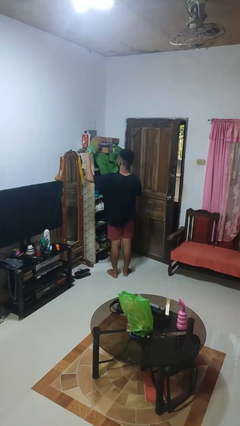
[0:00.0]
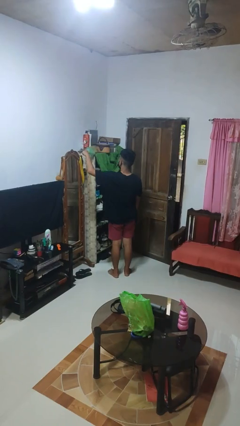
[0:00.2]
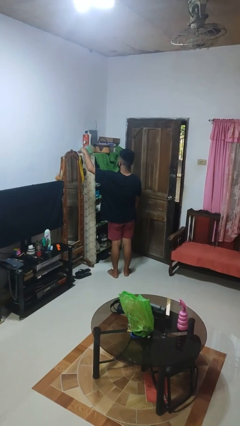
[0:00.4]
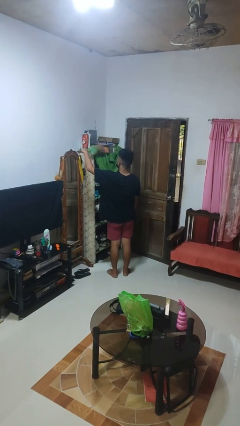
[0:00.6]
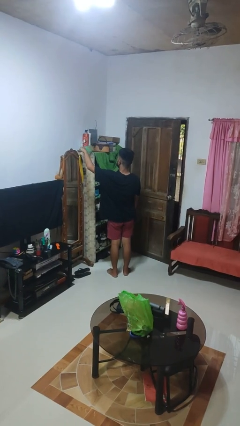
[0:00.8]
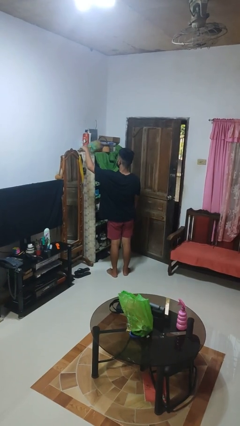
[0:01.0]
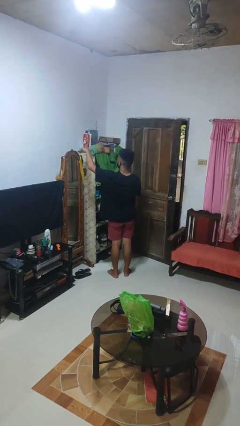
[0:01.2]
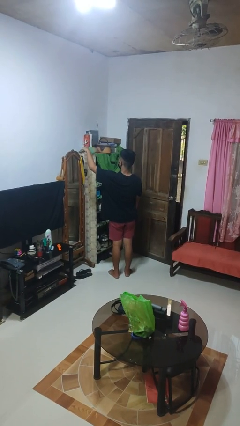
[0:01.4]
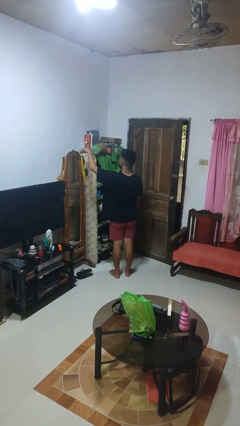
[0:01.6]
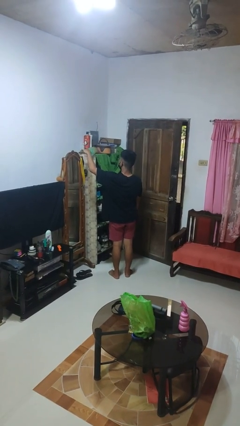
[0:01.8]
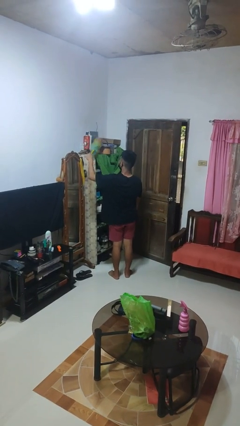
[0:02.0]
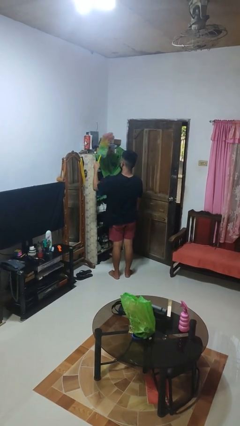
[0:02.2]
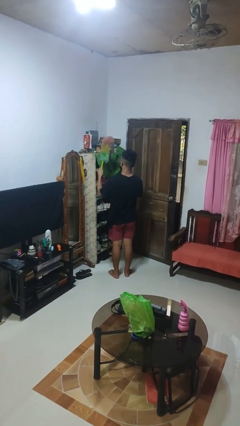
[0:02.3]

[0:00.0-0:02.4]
person dusts furniture

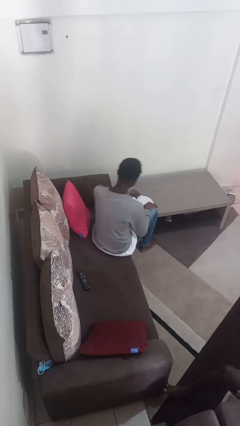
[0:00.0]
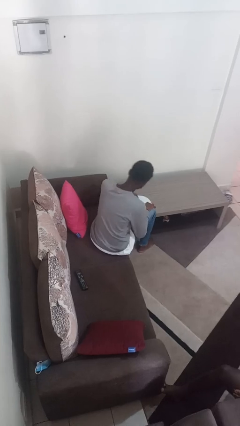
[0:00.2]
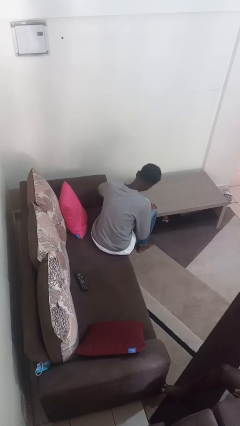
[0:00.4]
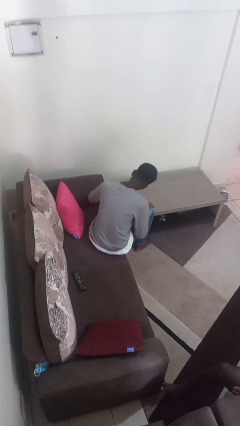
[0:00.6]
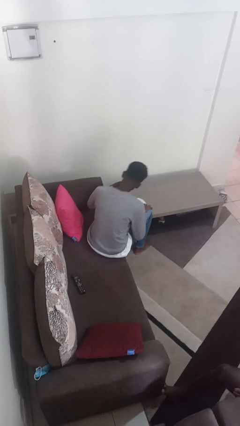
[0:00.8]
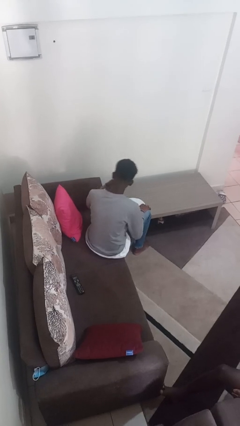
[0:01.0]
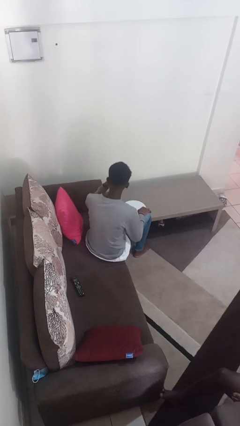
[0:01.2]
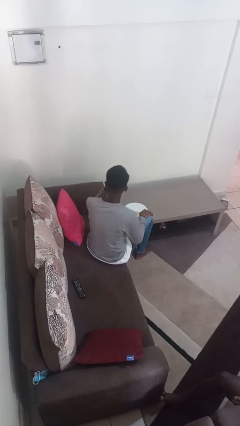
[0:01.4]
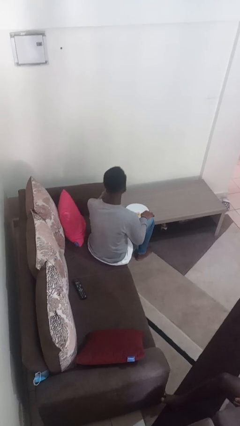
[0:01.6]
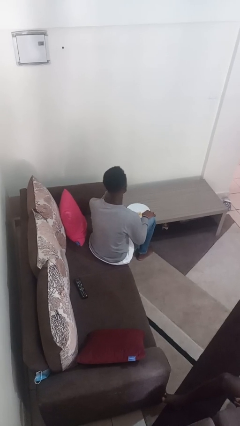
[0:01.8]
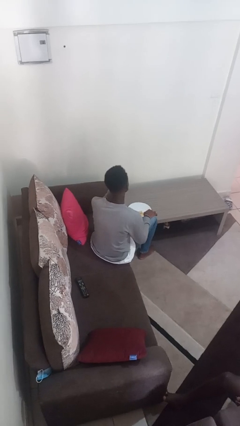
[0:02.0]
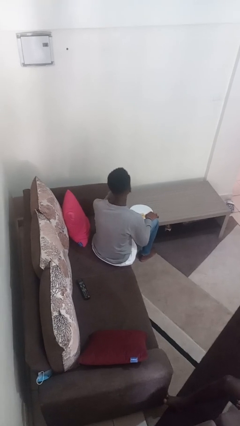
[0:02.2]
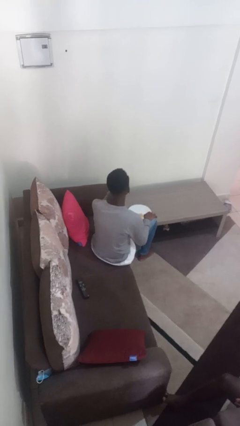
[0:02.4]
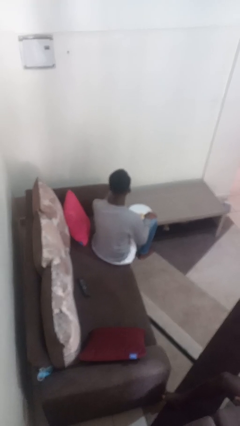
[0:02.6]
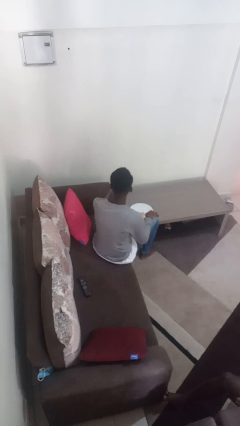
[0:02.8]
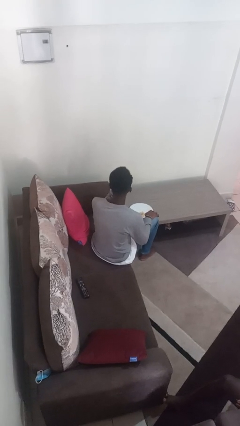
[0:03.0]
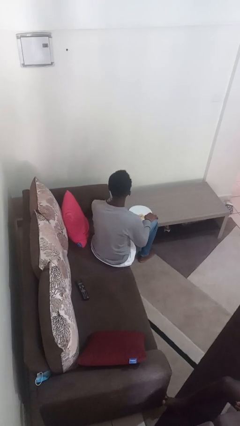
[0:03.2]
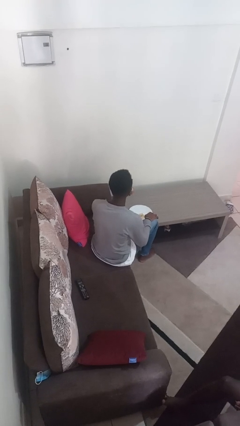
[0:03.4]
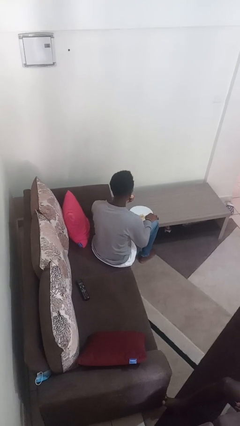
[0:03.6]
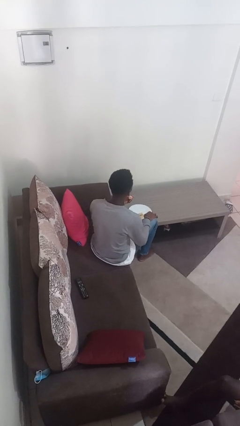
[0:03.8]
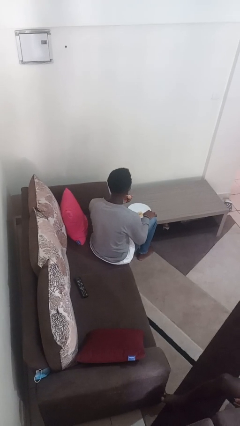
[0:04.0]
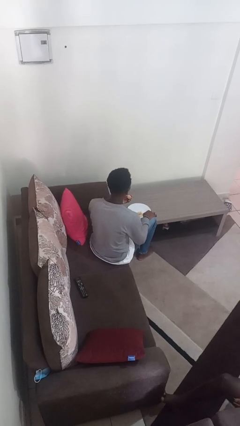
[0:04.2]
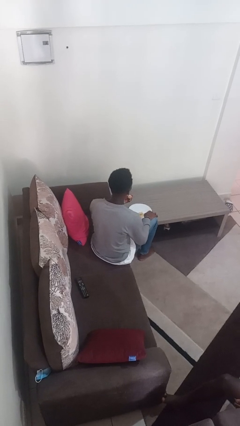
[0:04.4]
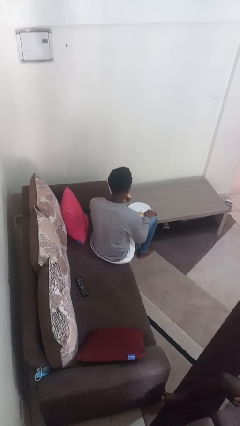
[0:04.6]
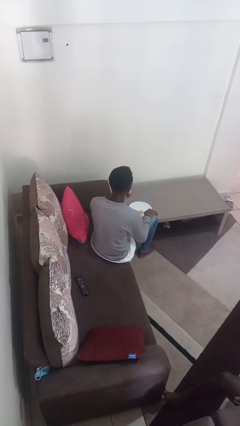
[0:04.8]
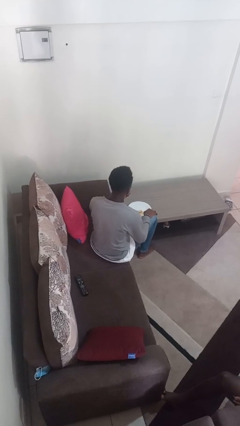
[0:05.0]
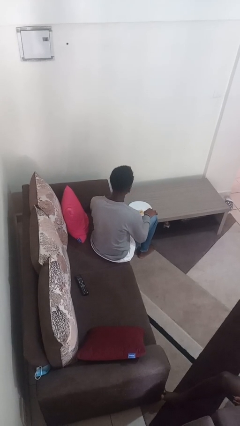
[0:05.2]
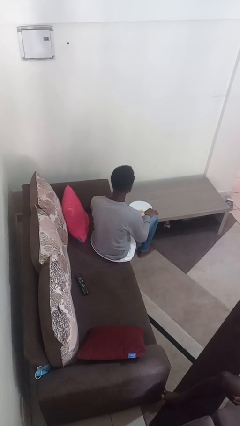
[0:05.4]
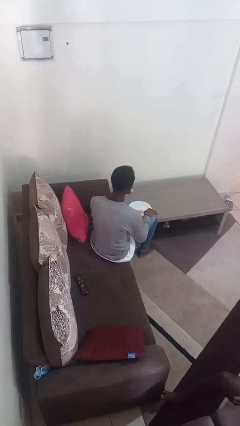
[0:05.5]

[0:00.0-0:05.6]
person eats with hands

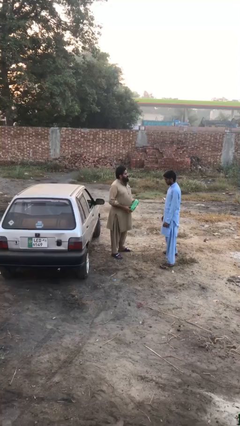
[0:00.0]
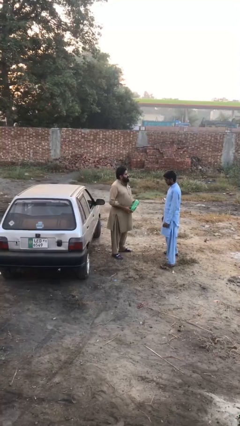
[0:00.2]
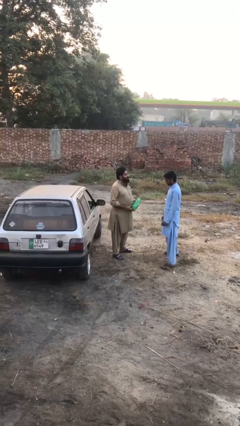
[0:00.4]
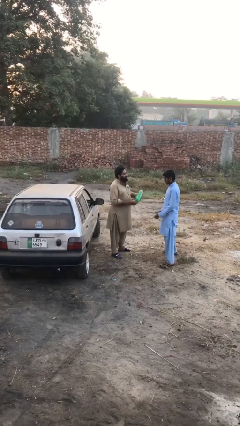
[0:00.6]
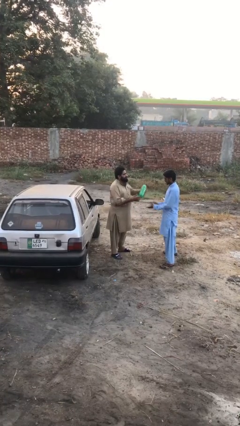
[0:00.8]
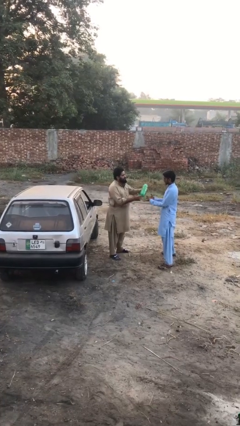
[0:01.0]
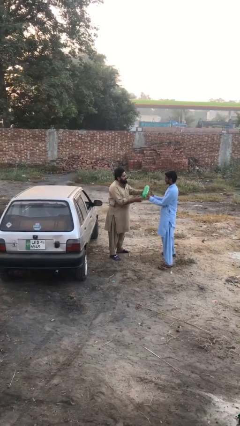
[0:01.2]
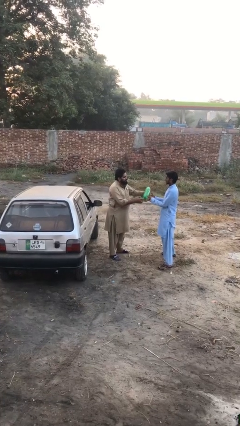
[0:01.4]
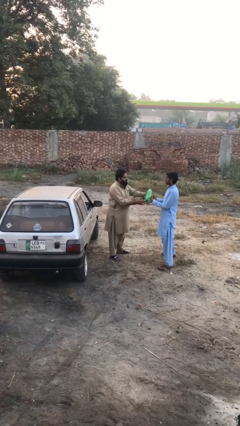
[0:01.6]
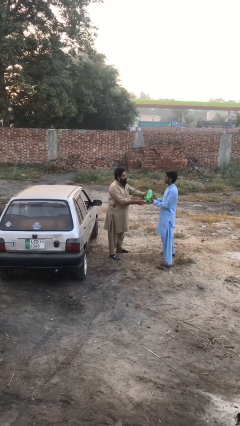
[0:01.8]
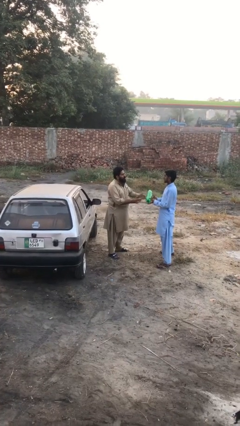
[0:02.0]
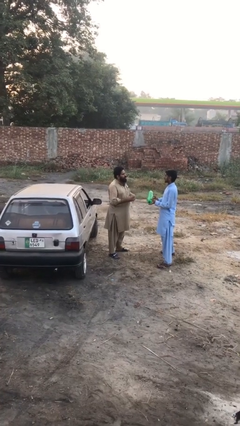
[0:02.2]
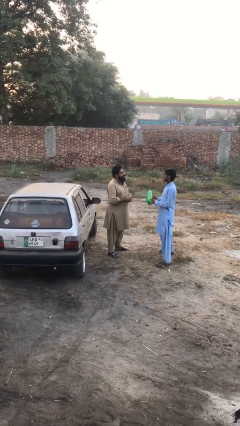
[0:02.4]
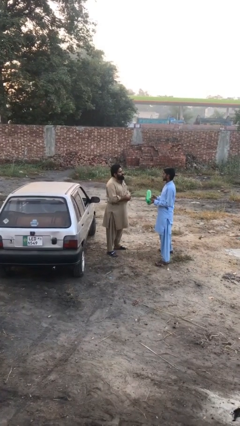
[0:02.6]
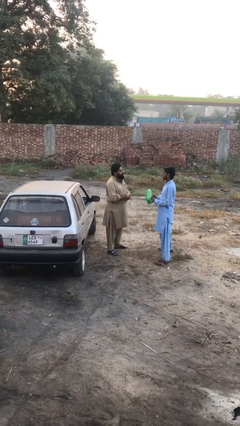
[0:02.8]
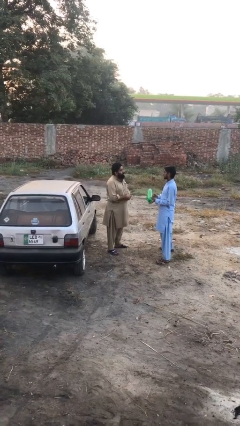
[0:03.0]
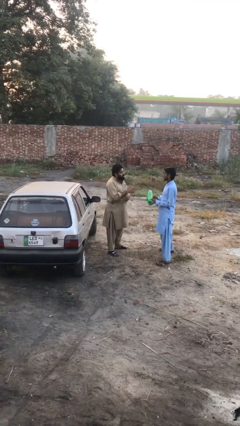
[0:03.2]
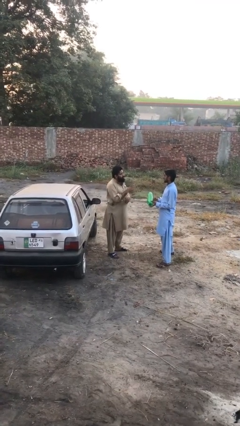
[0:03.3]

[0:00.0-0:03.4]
person transfers object to person

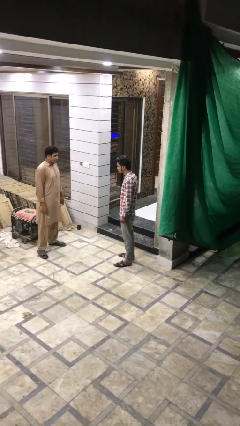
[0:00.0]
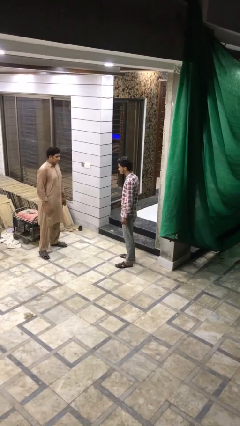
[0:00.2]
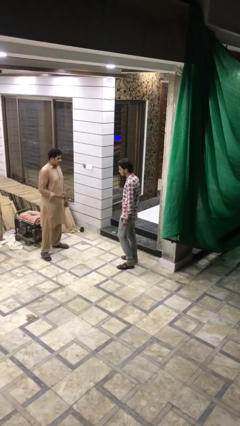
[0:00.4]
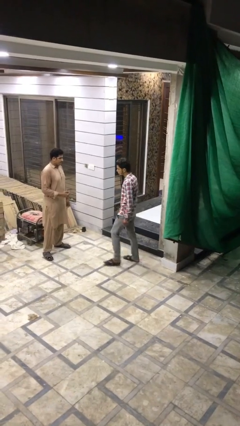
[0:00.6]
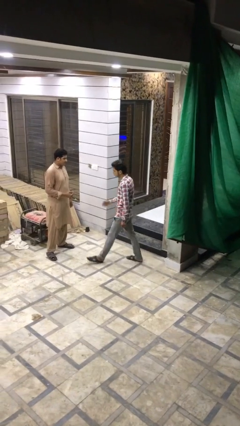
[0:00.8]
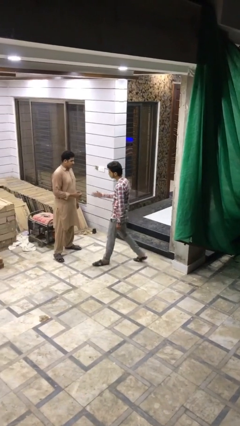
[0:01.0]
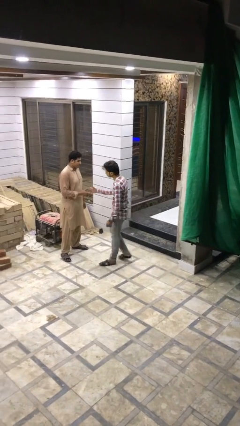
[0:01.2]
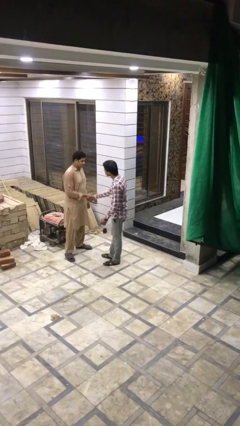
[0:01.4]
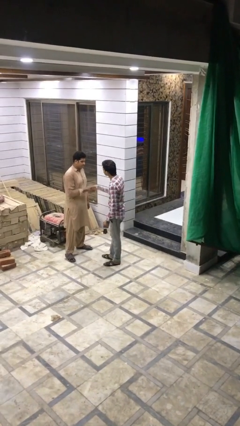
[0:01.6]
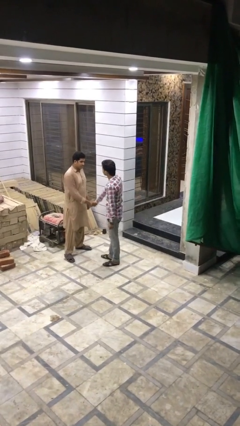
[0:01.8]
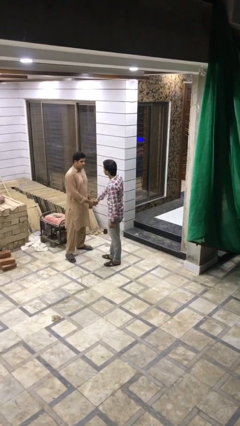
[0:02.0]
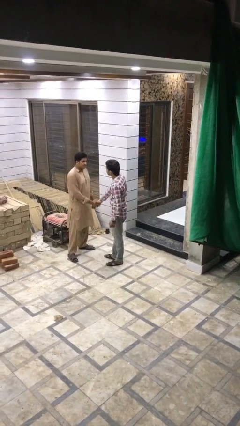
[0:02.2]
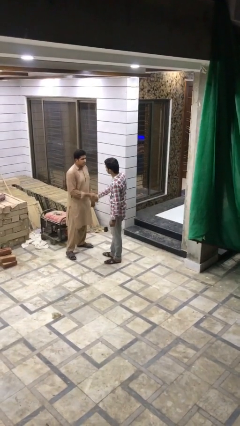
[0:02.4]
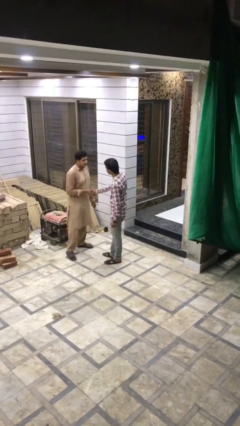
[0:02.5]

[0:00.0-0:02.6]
person shakes hand

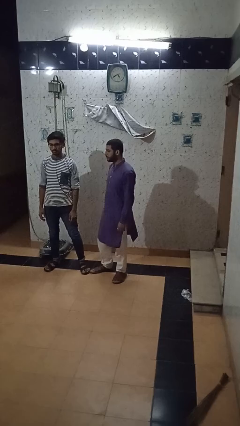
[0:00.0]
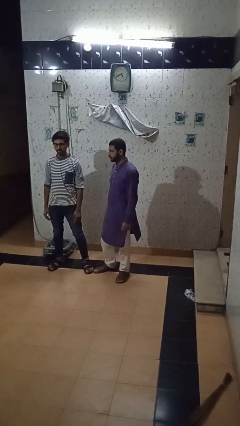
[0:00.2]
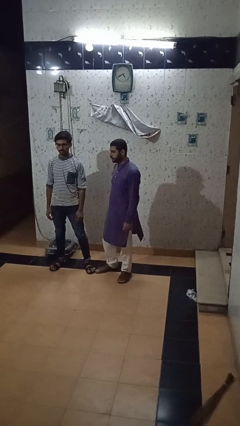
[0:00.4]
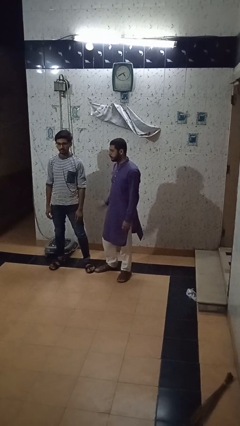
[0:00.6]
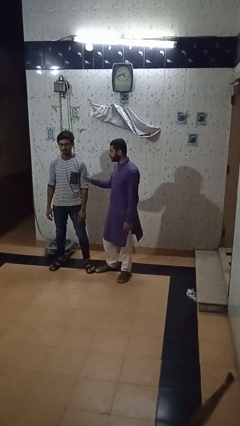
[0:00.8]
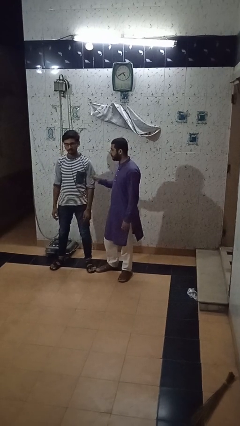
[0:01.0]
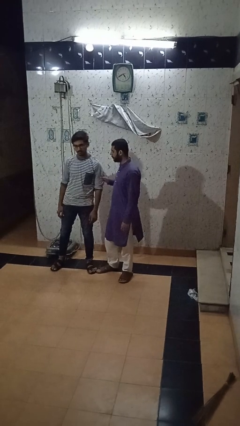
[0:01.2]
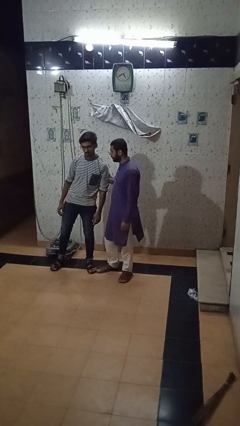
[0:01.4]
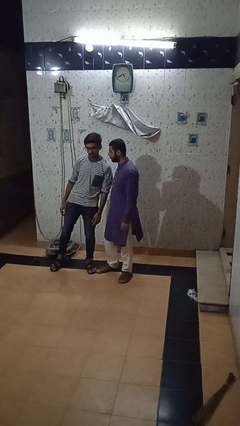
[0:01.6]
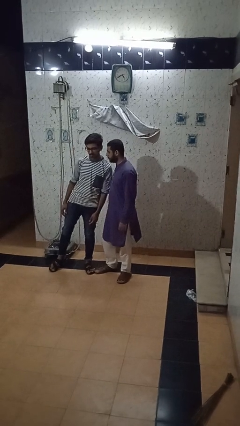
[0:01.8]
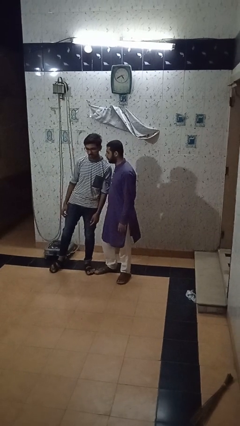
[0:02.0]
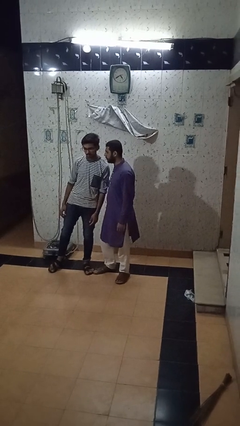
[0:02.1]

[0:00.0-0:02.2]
person grabs person by bicep

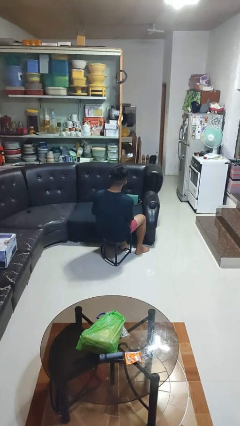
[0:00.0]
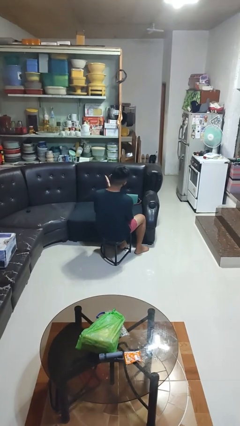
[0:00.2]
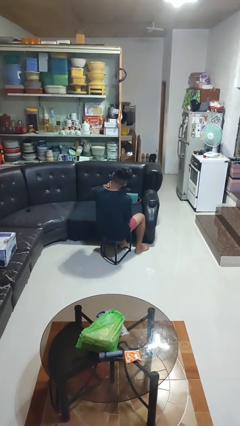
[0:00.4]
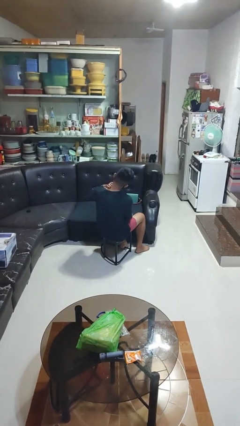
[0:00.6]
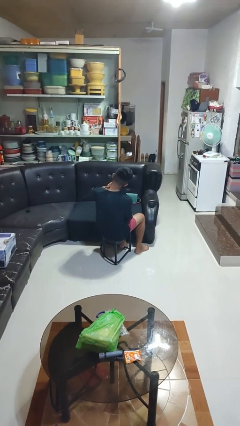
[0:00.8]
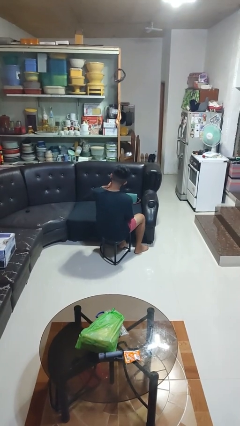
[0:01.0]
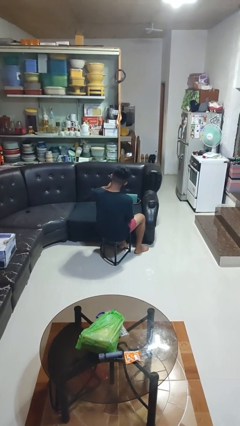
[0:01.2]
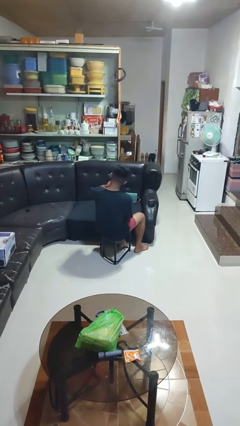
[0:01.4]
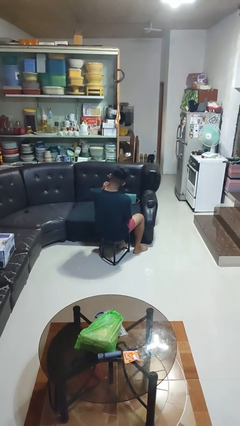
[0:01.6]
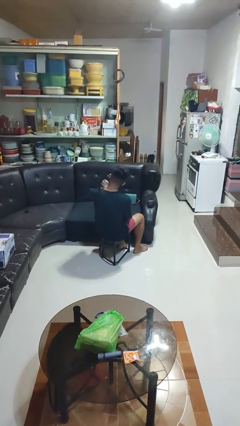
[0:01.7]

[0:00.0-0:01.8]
person swats bug
